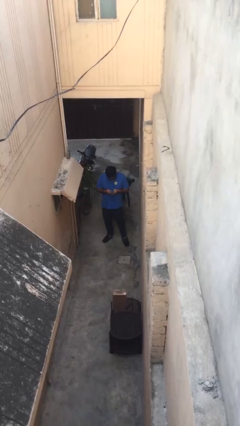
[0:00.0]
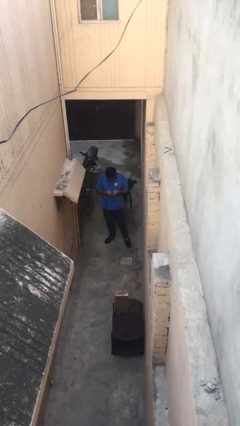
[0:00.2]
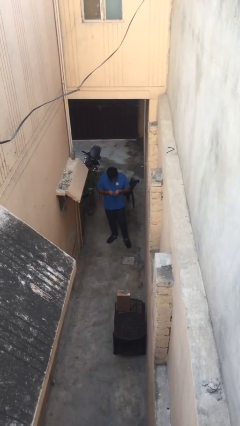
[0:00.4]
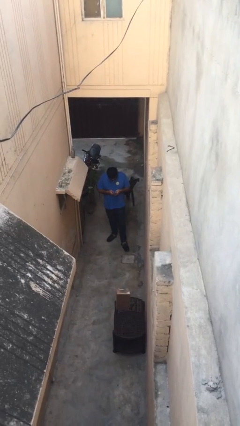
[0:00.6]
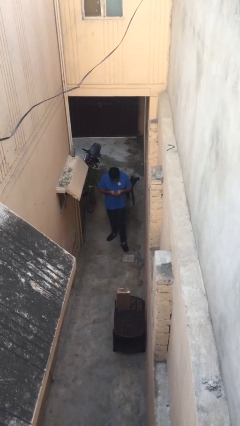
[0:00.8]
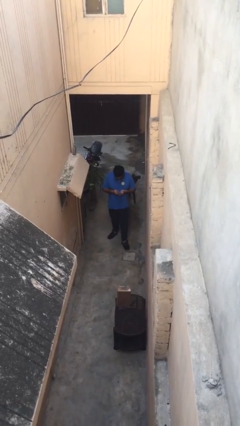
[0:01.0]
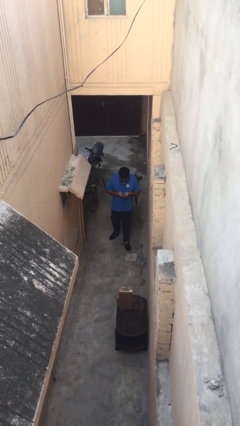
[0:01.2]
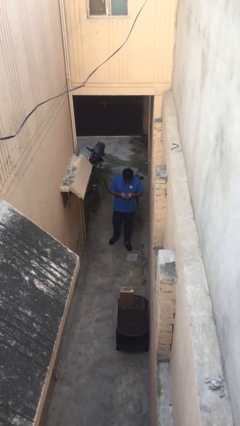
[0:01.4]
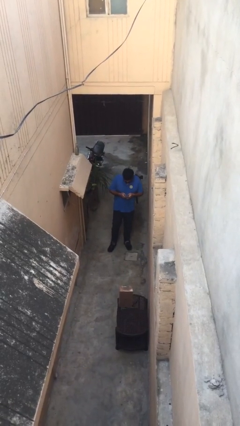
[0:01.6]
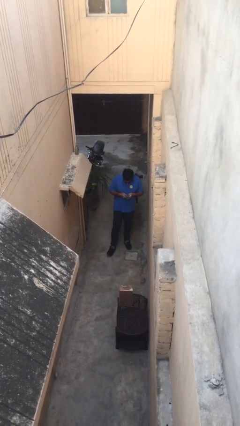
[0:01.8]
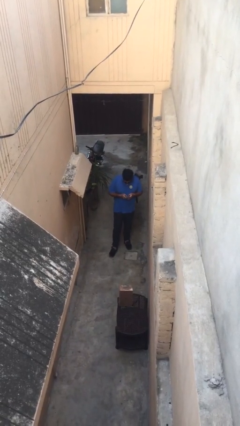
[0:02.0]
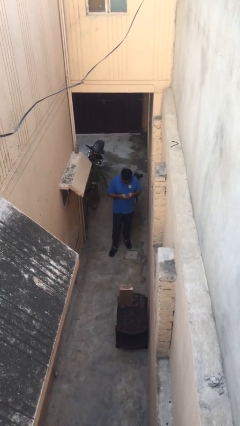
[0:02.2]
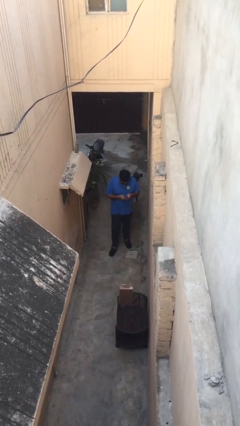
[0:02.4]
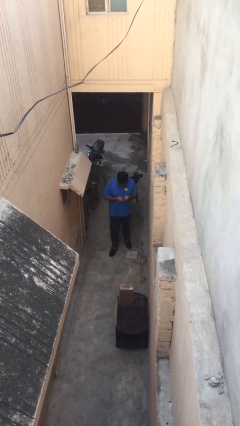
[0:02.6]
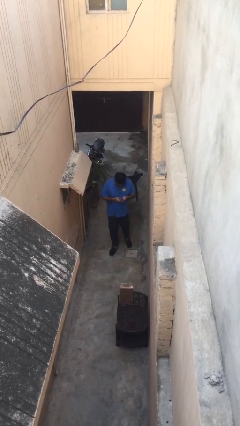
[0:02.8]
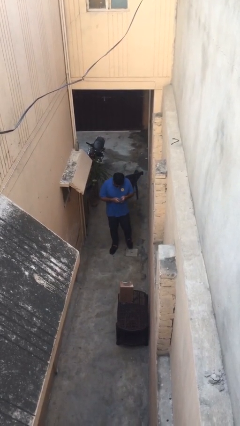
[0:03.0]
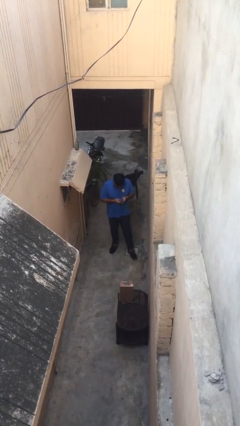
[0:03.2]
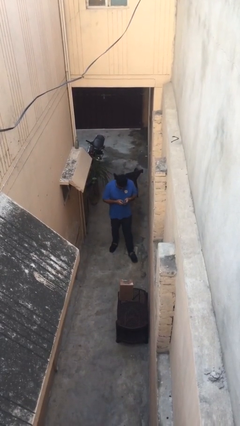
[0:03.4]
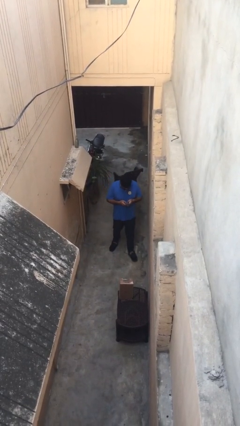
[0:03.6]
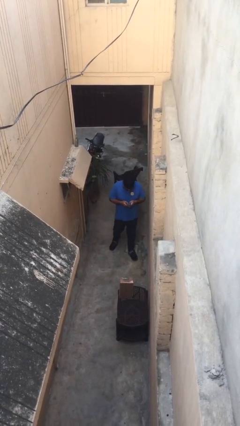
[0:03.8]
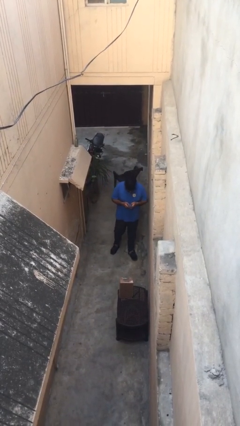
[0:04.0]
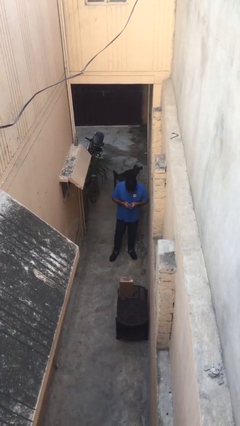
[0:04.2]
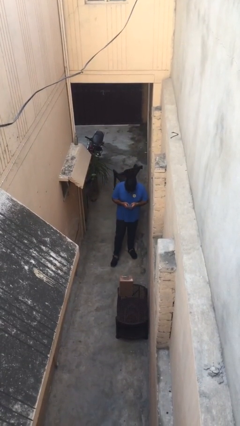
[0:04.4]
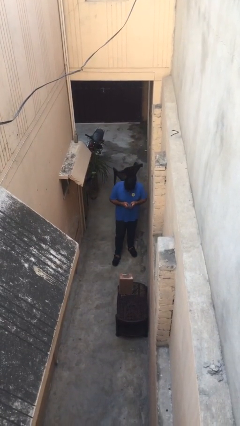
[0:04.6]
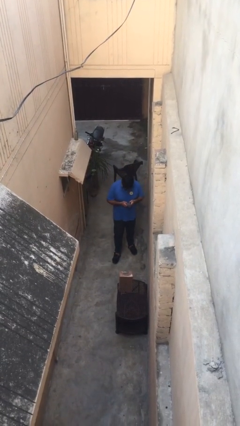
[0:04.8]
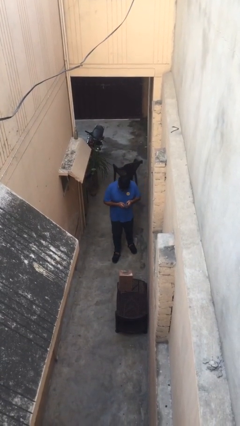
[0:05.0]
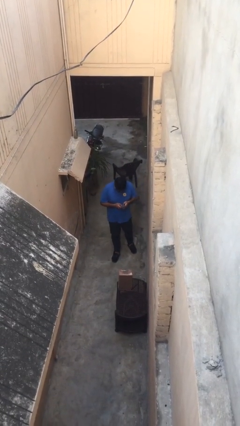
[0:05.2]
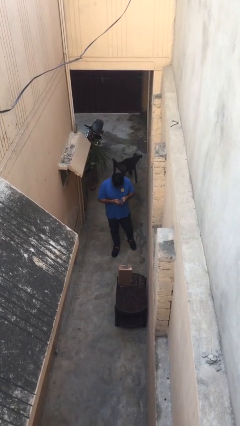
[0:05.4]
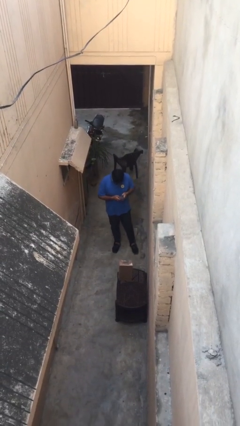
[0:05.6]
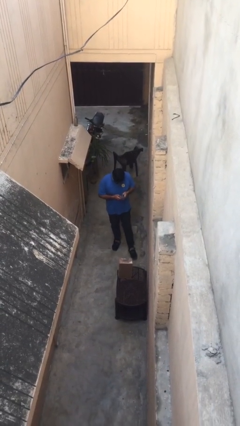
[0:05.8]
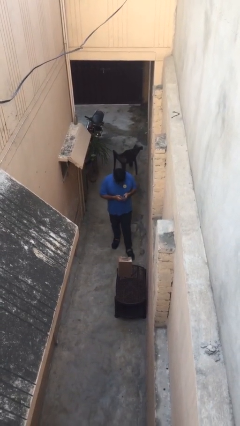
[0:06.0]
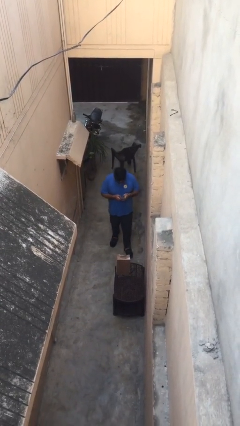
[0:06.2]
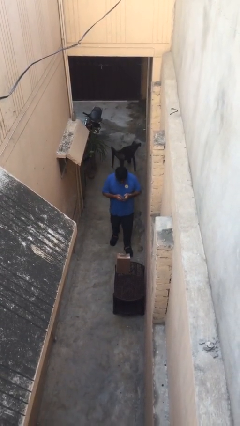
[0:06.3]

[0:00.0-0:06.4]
person texts on phone

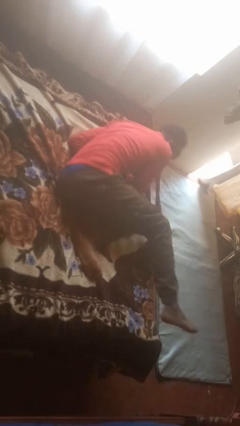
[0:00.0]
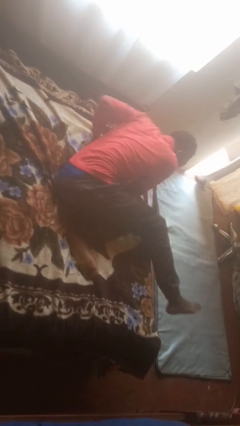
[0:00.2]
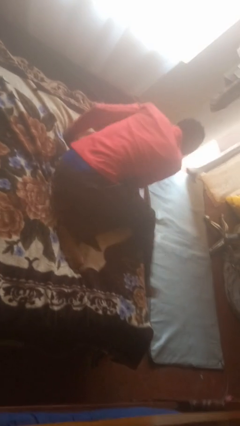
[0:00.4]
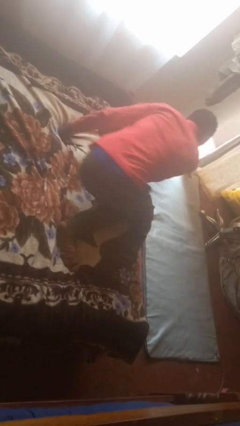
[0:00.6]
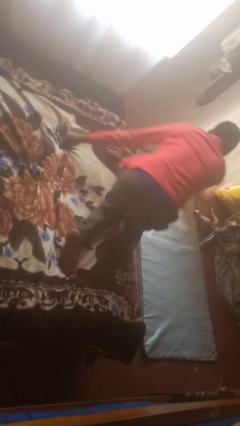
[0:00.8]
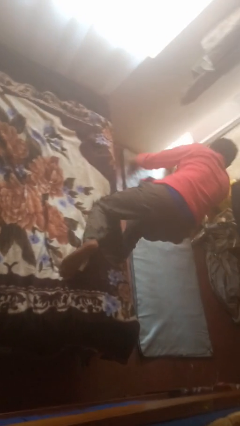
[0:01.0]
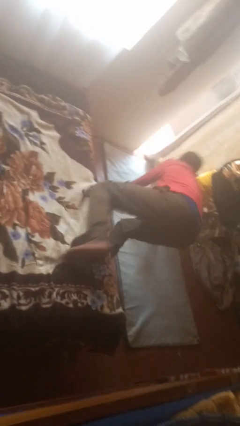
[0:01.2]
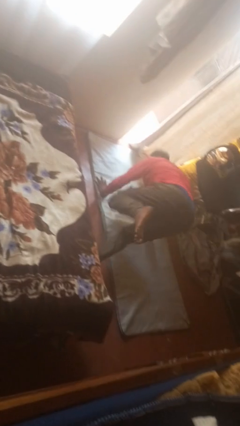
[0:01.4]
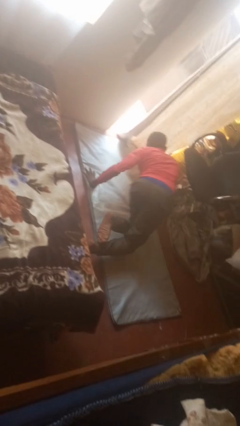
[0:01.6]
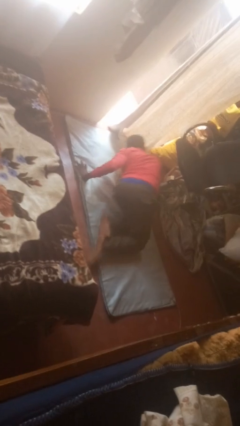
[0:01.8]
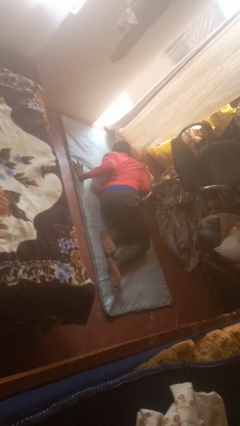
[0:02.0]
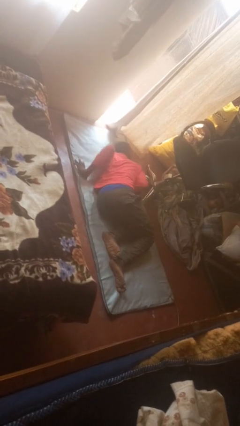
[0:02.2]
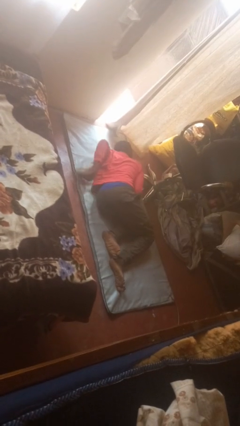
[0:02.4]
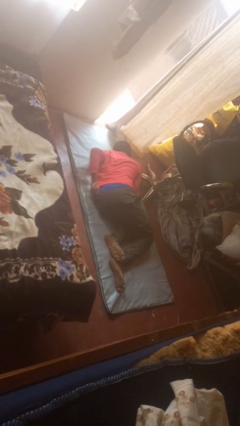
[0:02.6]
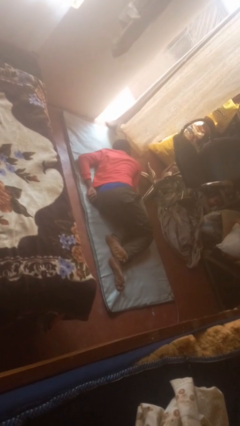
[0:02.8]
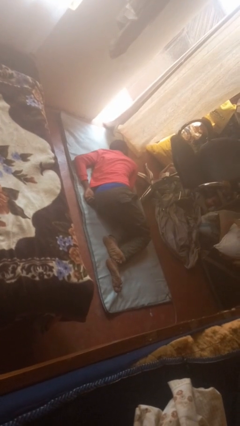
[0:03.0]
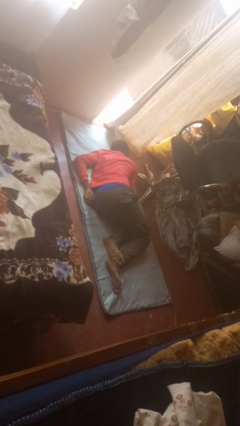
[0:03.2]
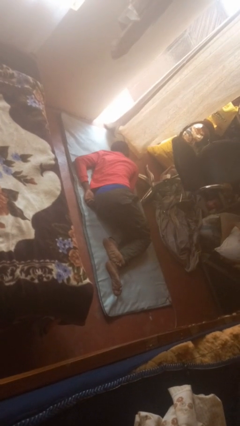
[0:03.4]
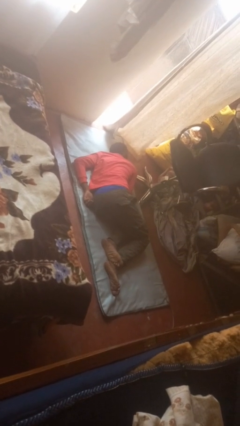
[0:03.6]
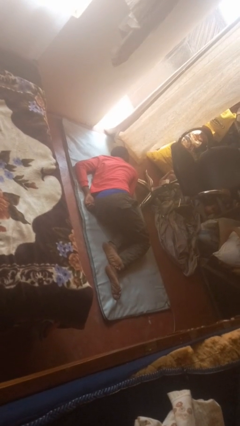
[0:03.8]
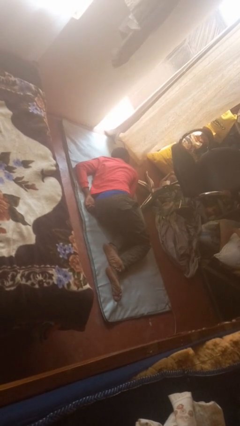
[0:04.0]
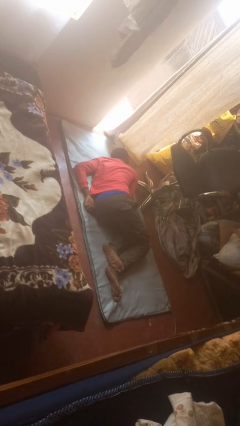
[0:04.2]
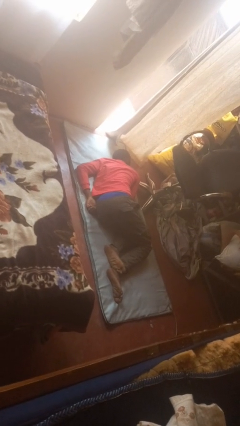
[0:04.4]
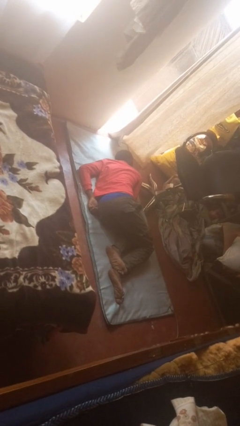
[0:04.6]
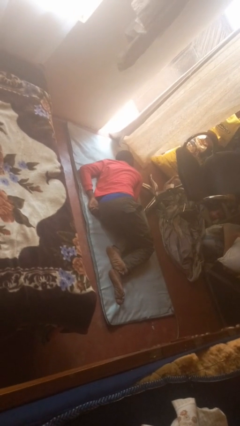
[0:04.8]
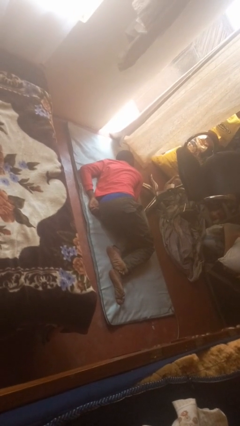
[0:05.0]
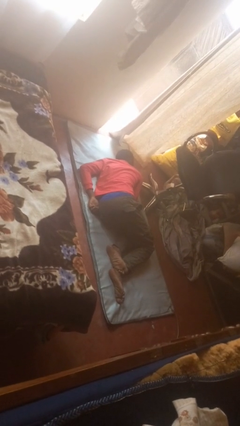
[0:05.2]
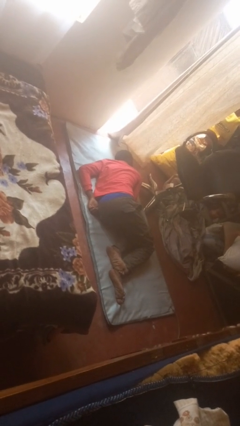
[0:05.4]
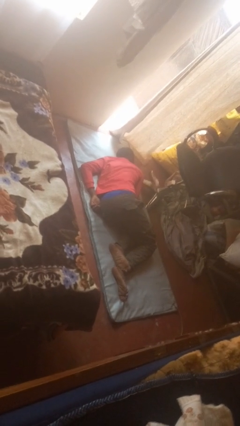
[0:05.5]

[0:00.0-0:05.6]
person falls from bed

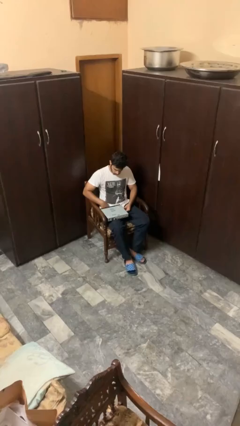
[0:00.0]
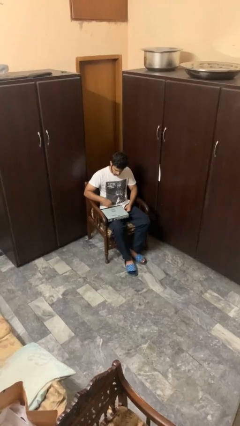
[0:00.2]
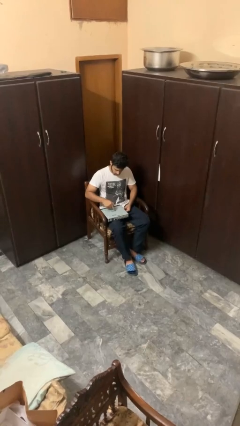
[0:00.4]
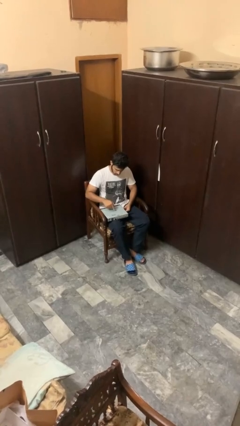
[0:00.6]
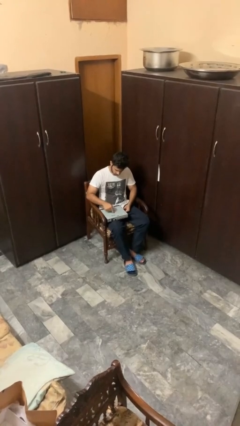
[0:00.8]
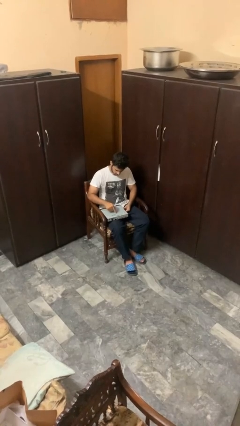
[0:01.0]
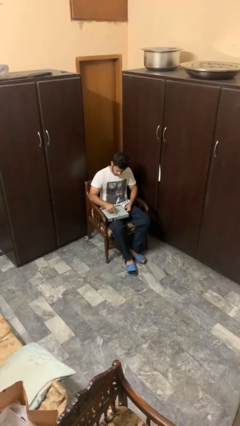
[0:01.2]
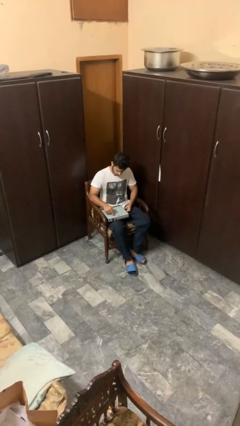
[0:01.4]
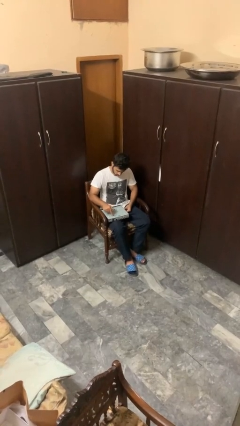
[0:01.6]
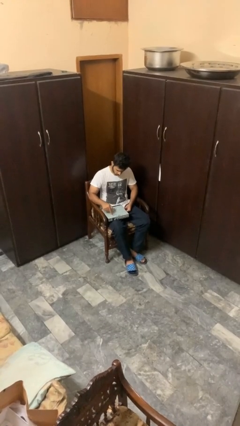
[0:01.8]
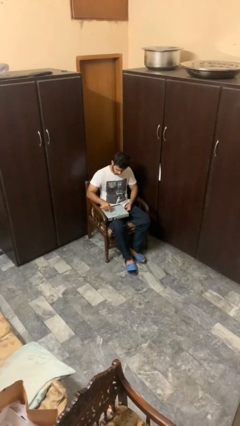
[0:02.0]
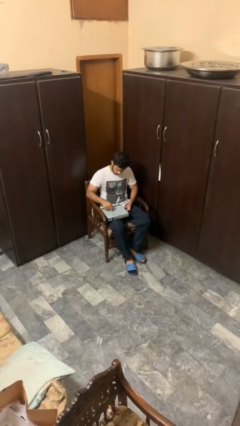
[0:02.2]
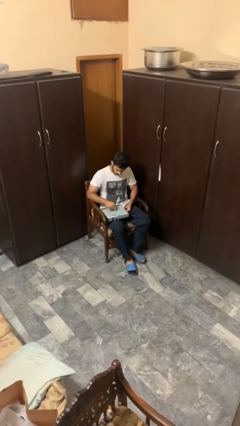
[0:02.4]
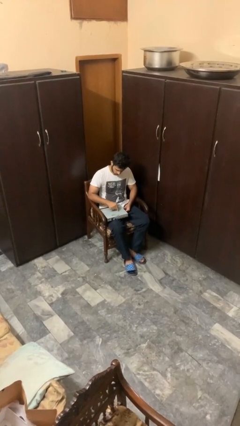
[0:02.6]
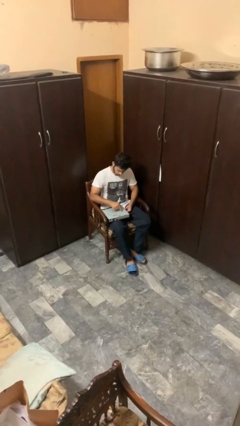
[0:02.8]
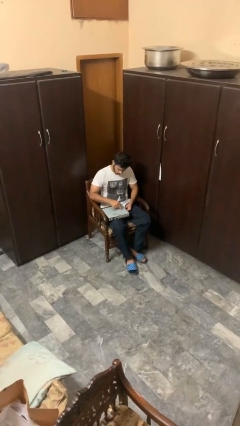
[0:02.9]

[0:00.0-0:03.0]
person taps object with finger

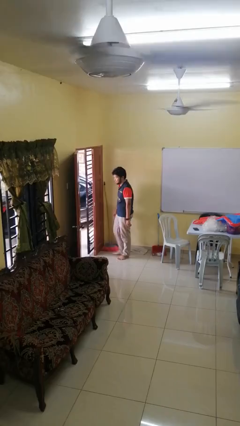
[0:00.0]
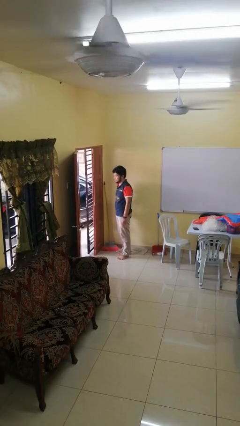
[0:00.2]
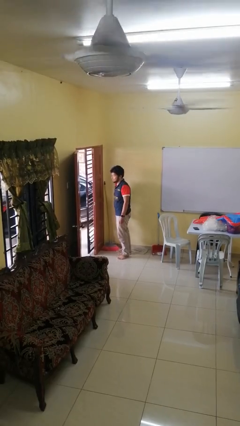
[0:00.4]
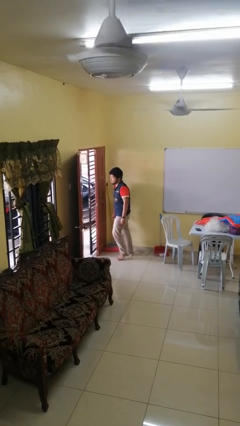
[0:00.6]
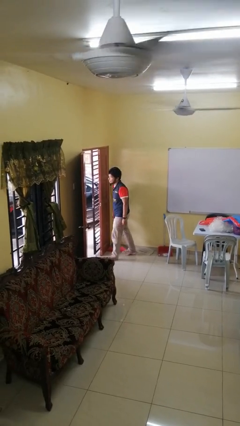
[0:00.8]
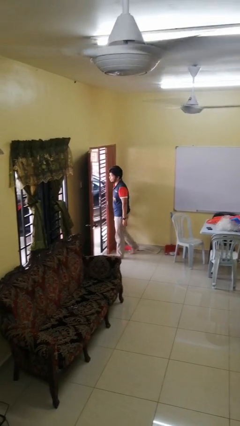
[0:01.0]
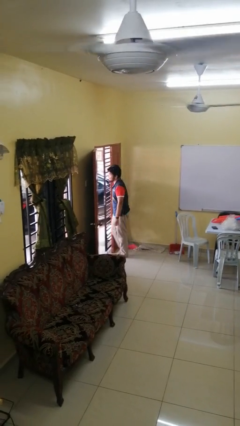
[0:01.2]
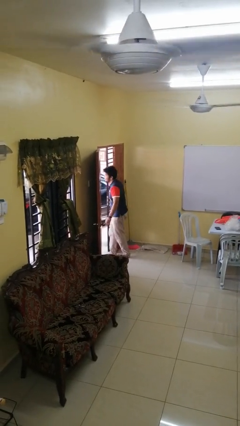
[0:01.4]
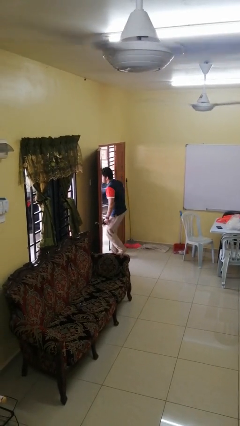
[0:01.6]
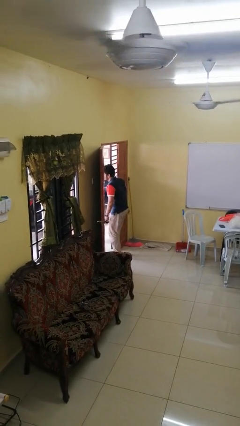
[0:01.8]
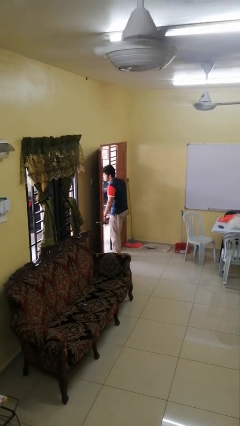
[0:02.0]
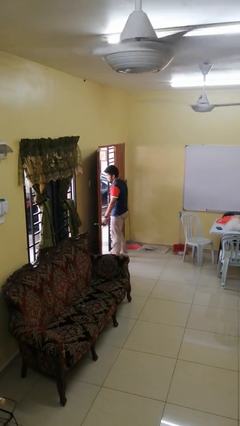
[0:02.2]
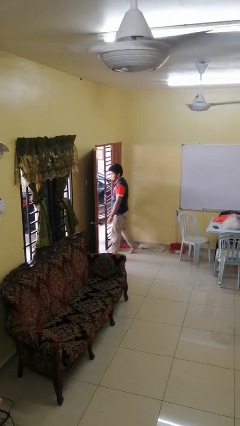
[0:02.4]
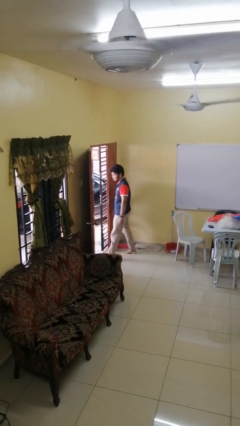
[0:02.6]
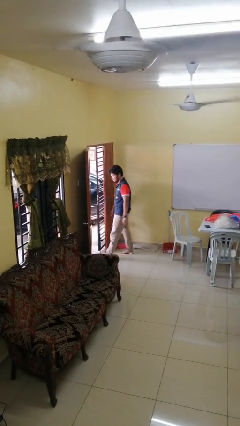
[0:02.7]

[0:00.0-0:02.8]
person bumps into wall
